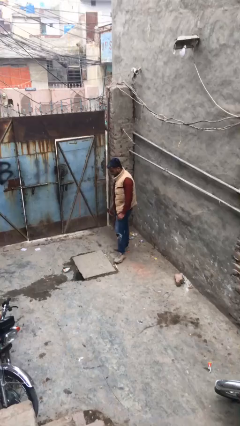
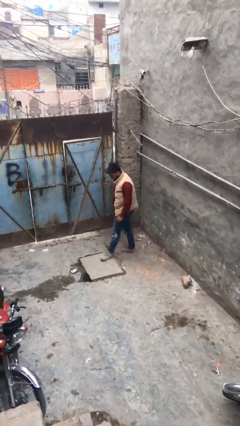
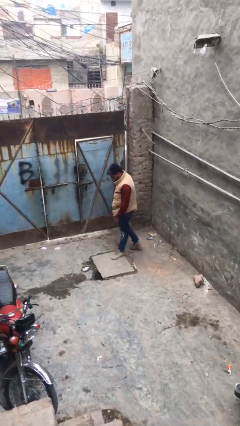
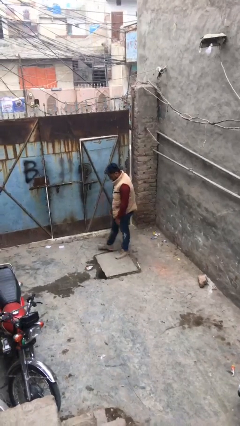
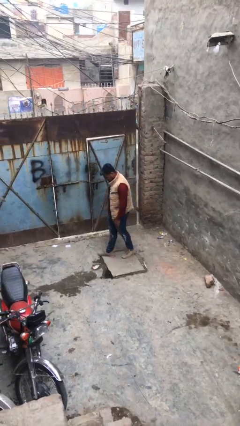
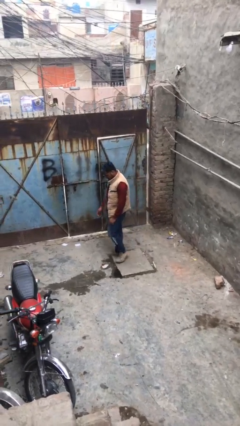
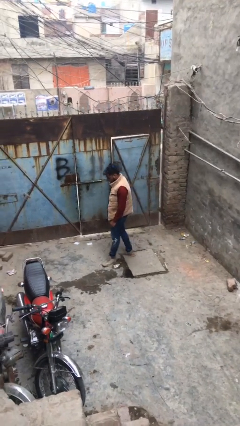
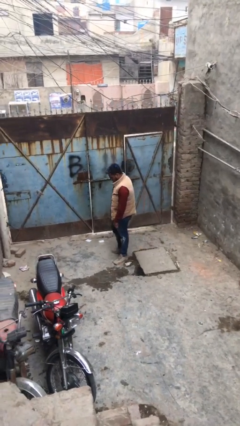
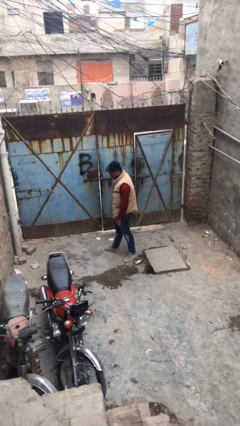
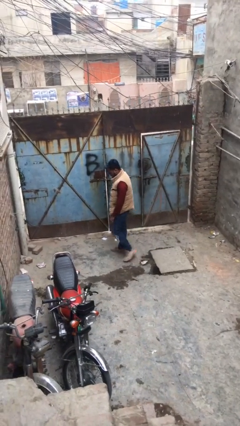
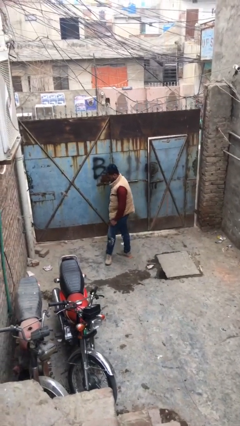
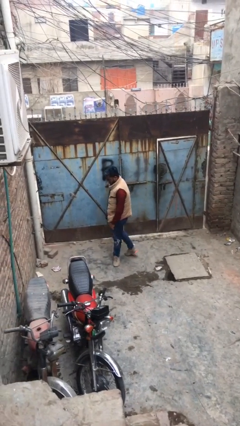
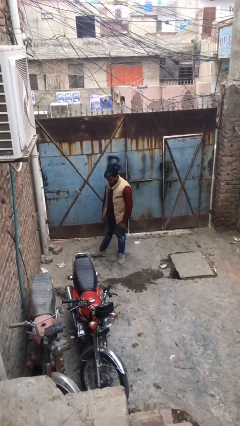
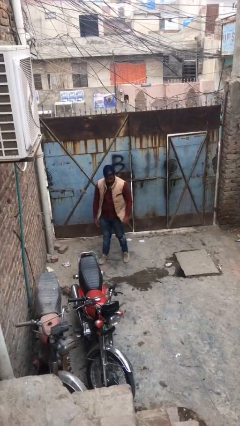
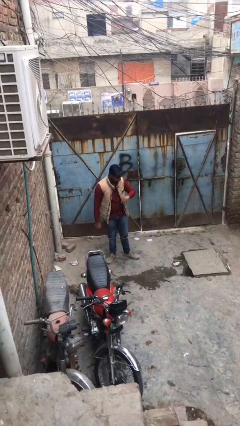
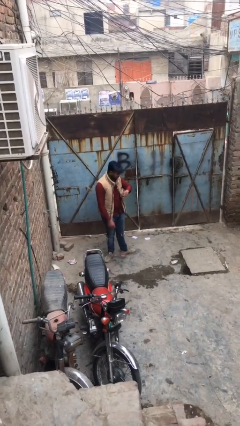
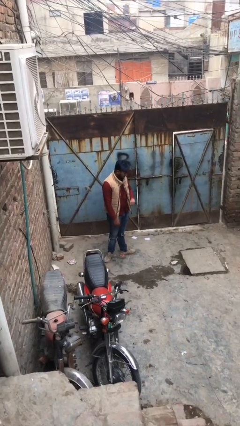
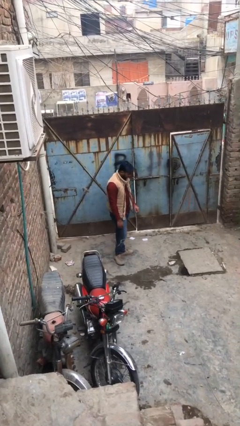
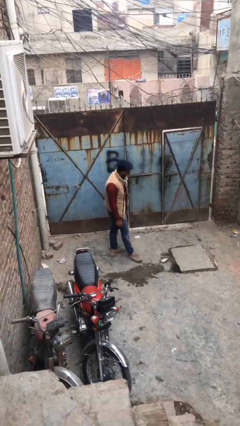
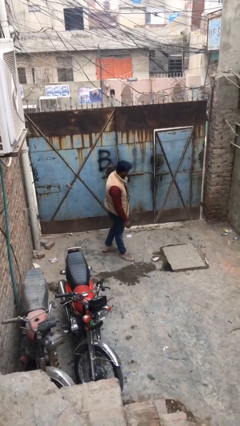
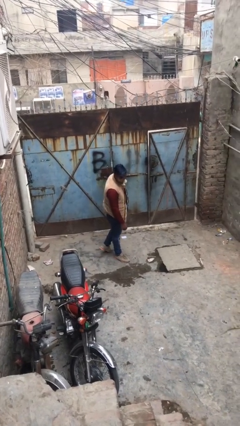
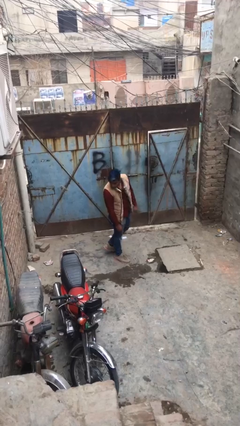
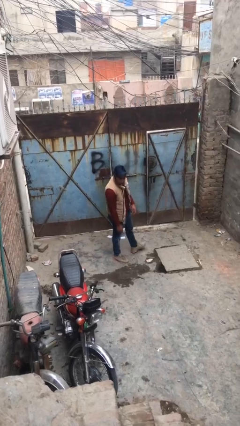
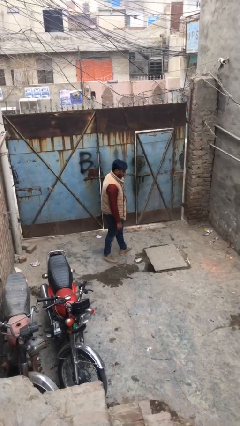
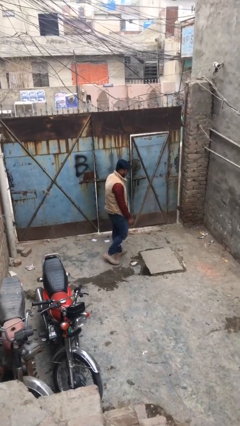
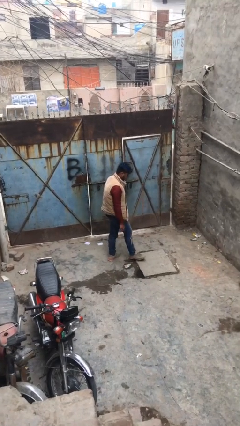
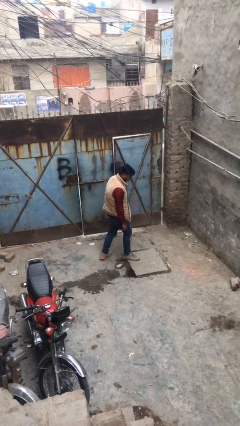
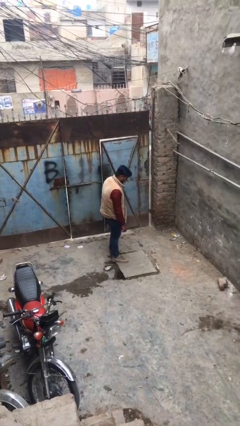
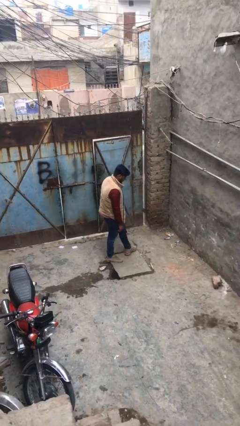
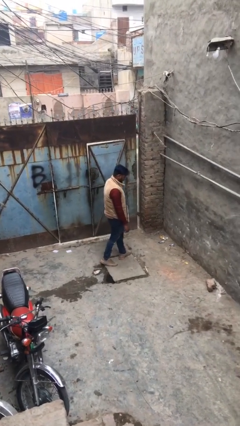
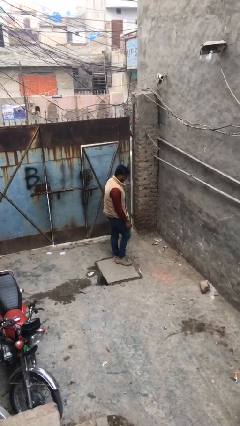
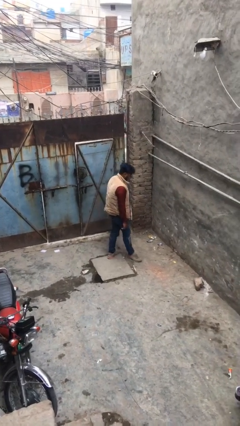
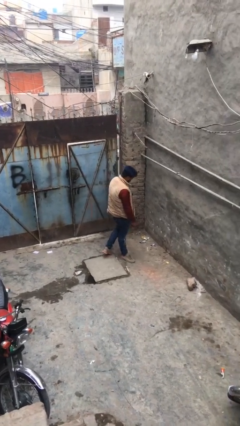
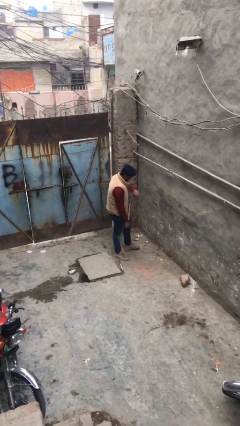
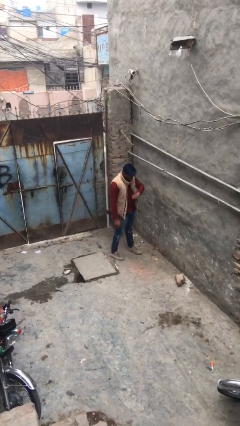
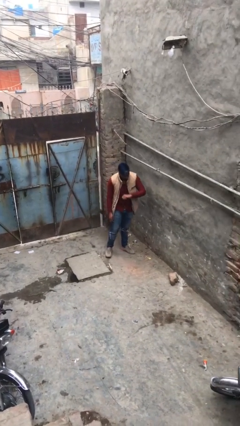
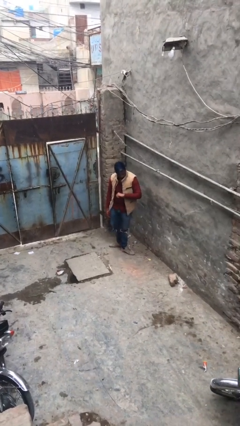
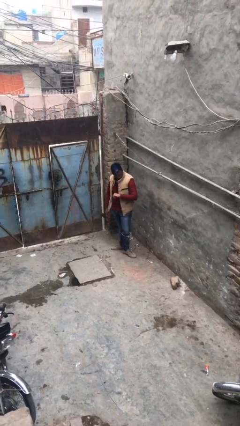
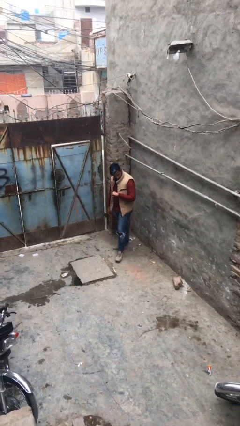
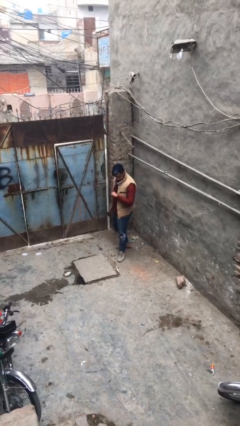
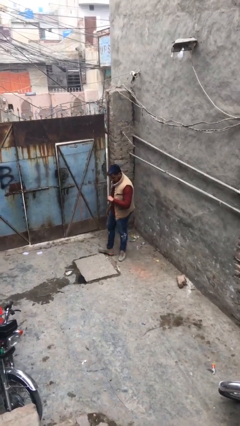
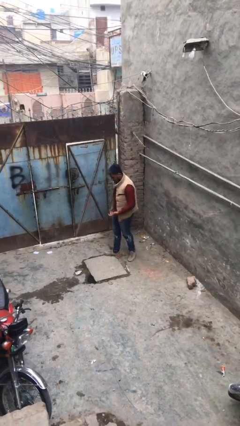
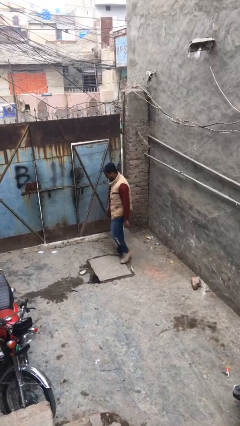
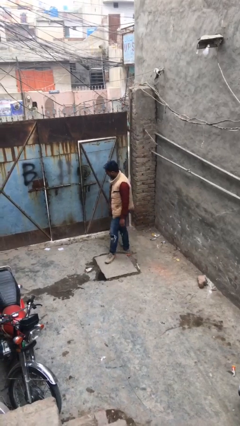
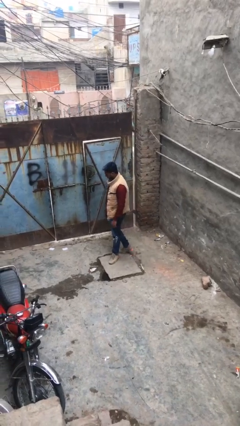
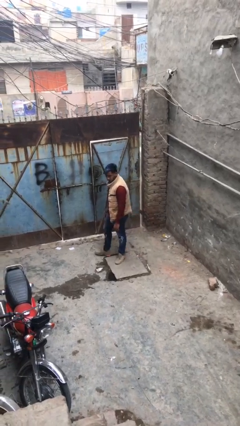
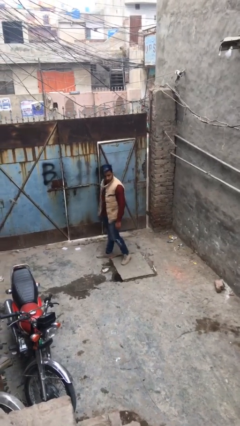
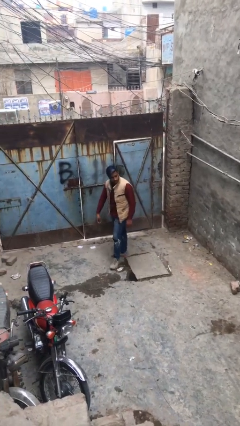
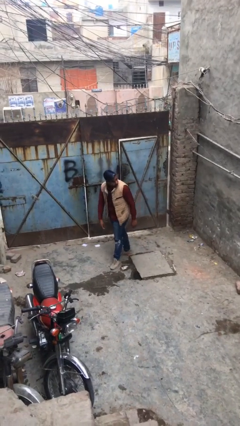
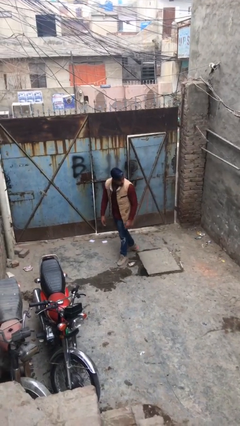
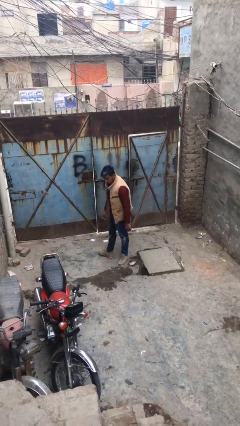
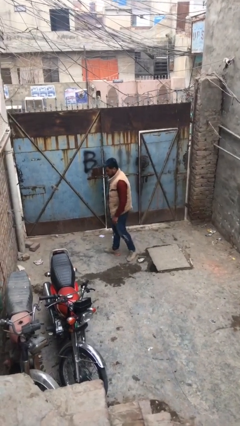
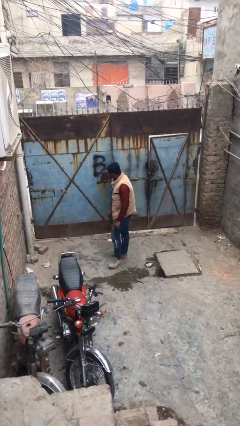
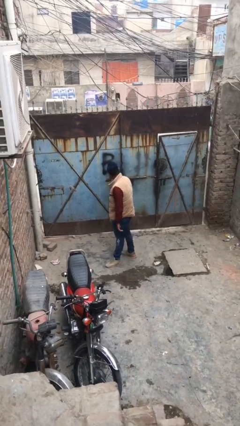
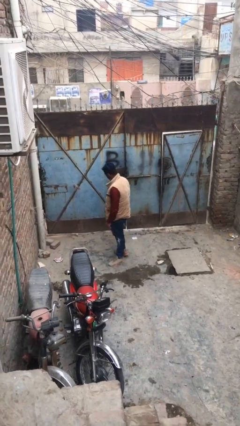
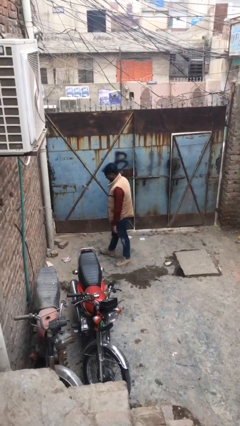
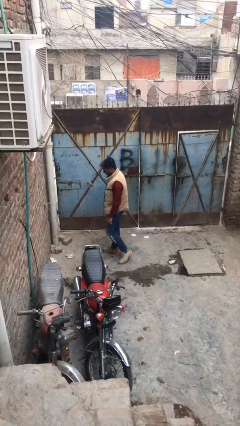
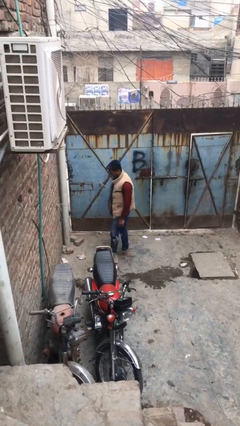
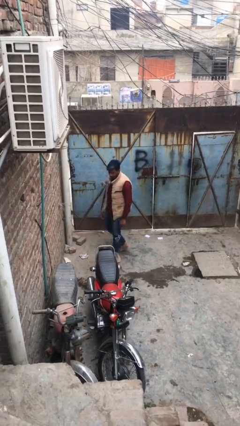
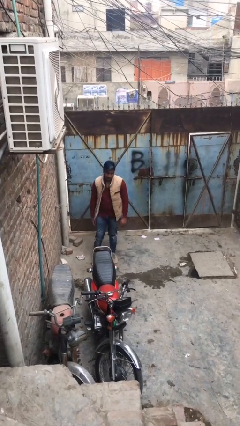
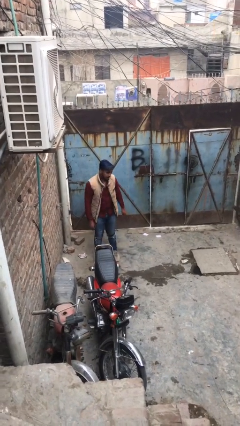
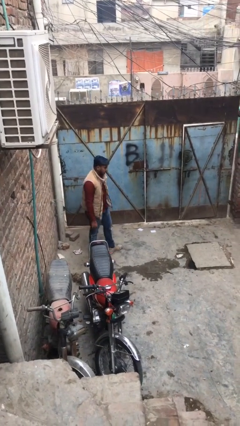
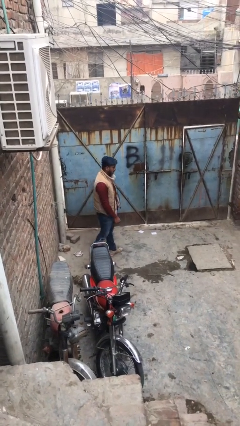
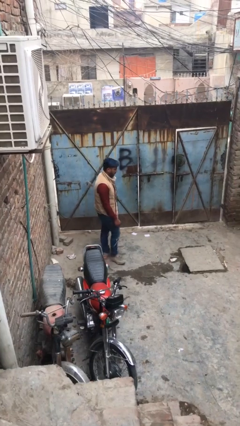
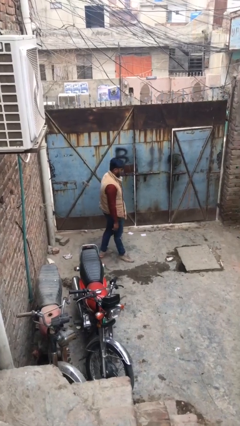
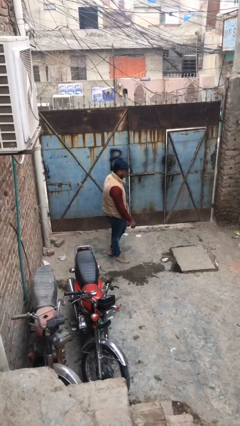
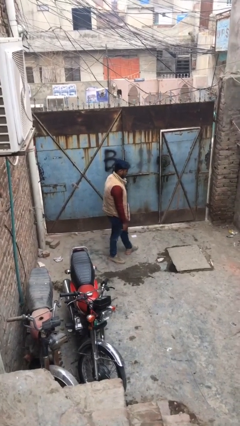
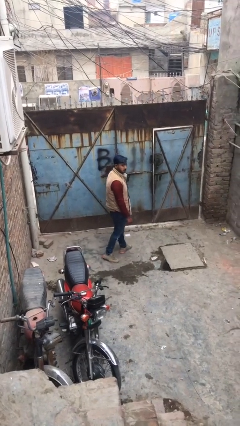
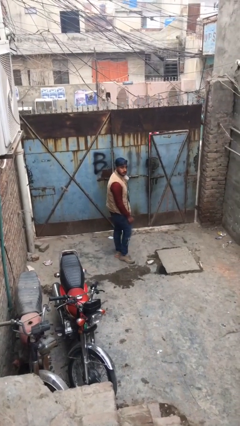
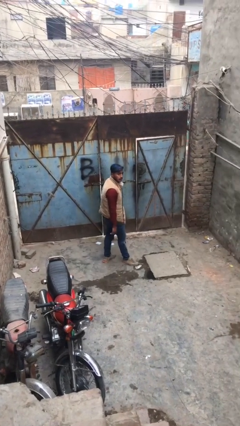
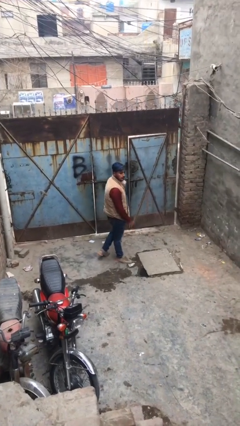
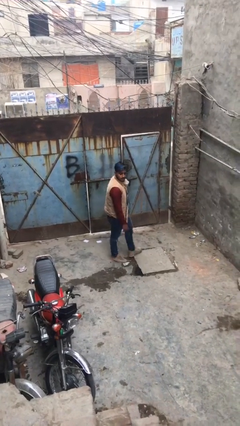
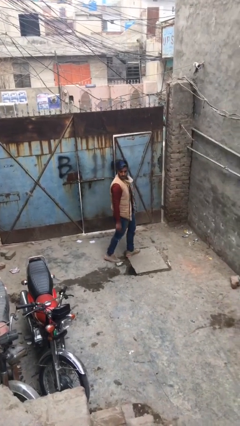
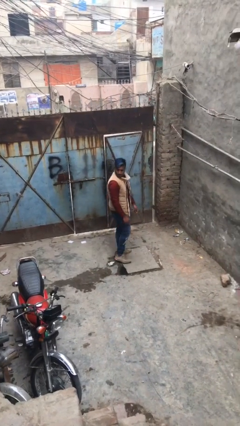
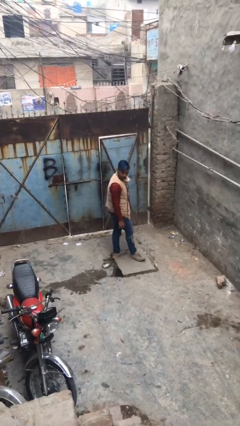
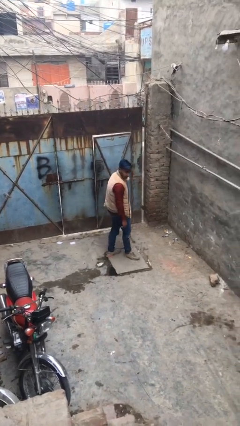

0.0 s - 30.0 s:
person walks

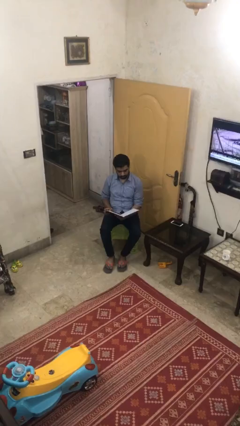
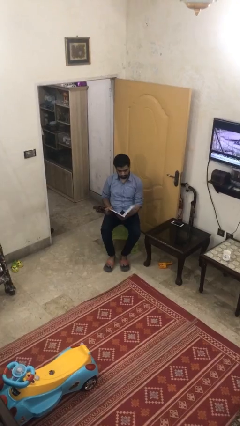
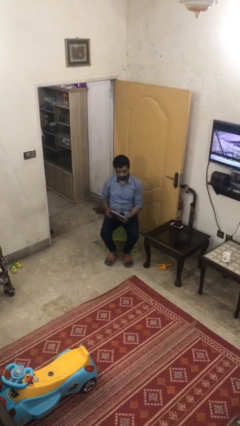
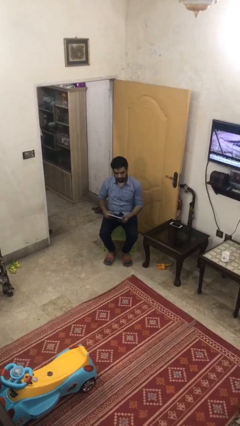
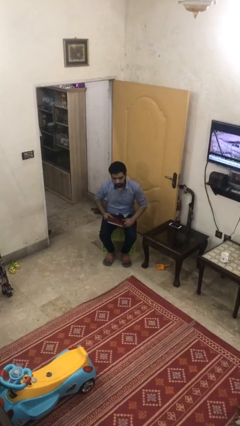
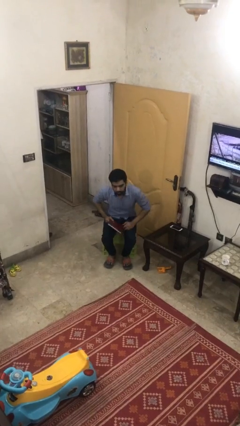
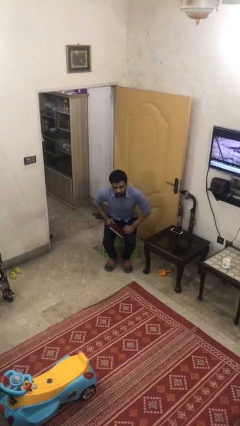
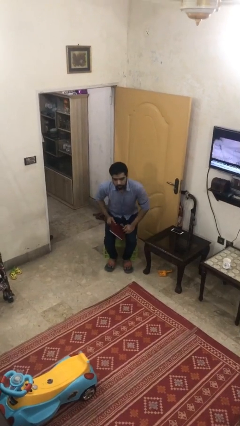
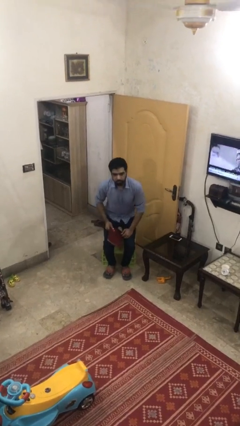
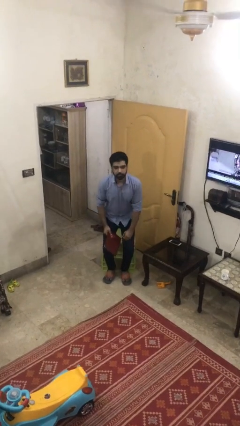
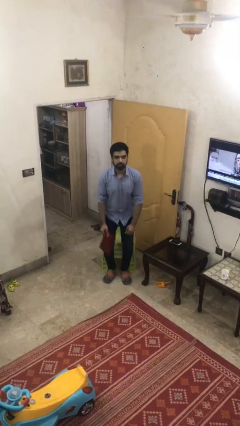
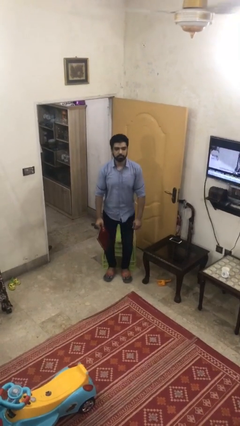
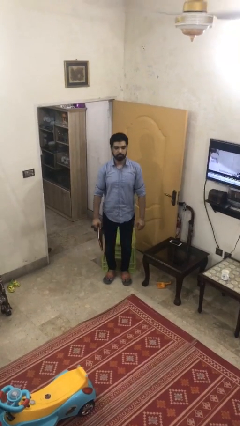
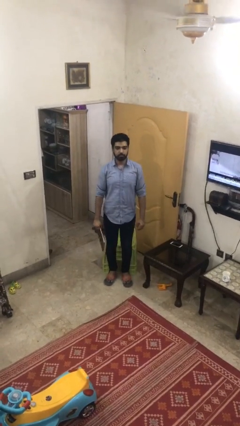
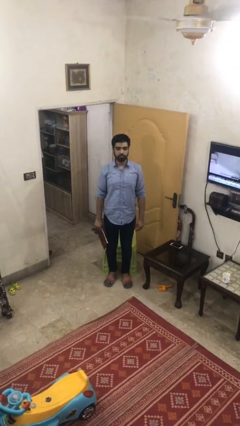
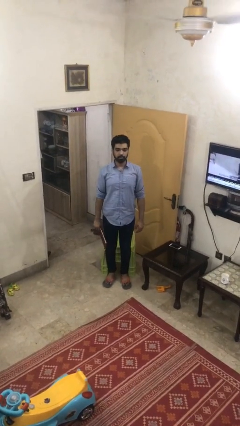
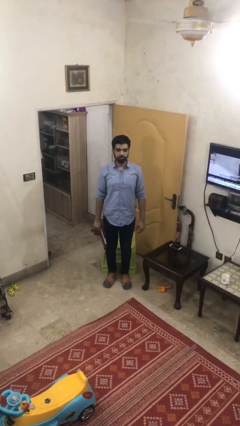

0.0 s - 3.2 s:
person stands up

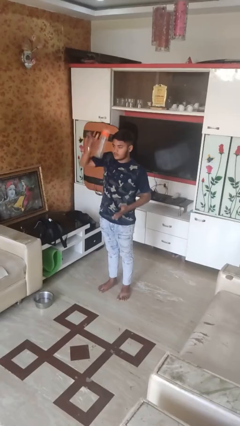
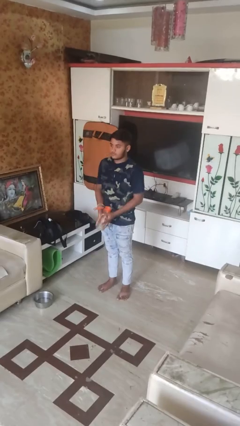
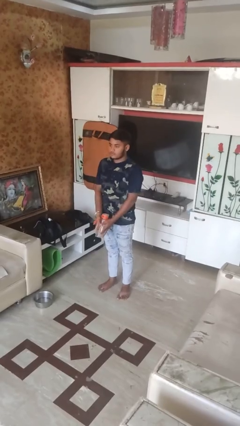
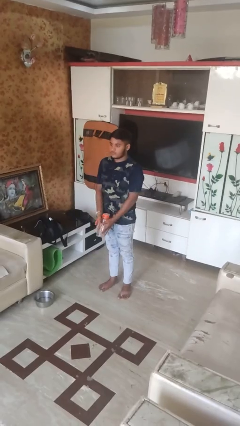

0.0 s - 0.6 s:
person catches dropped object
